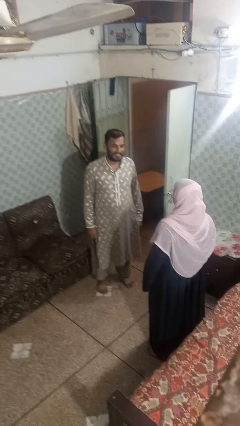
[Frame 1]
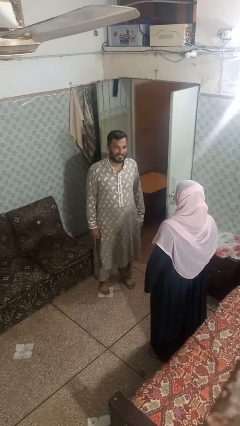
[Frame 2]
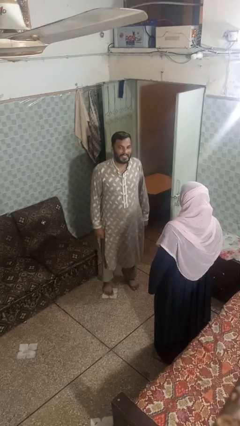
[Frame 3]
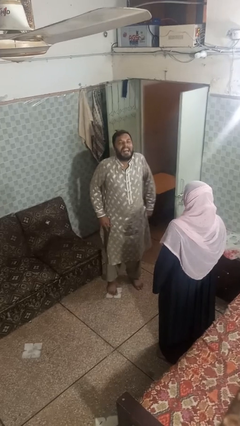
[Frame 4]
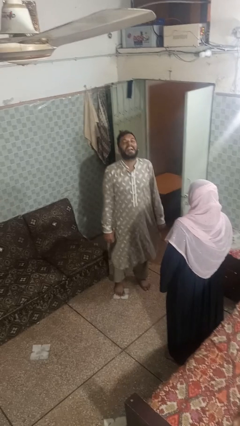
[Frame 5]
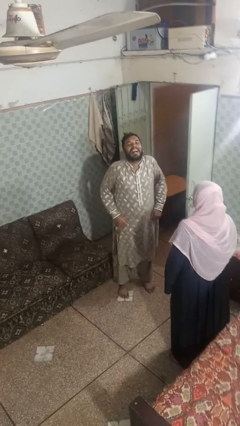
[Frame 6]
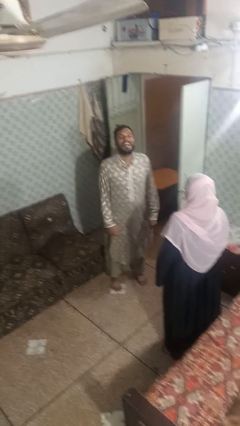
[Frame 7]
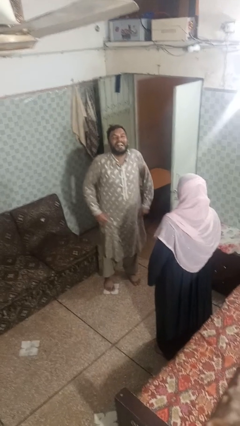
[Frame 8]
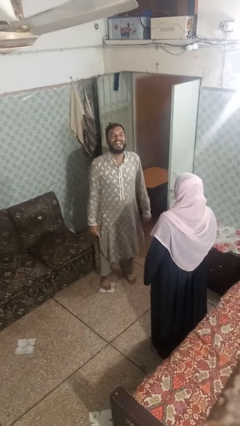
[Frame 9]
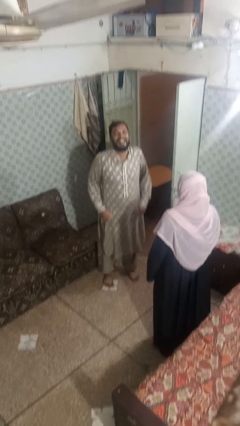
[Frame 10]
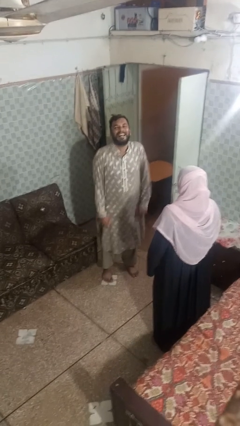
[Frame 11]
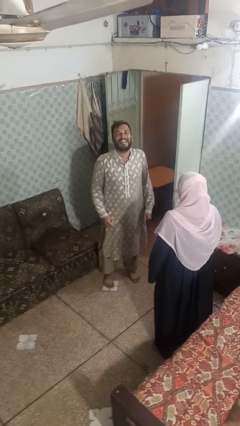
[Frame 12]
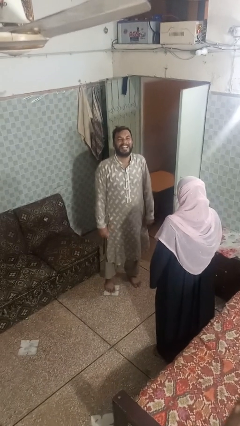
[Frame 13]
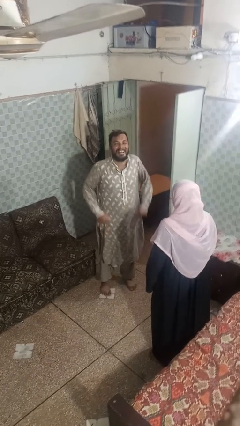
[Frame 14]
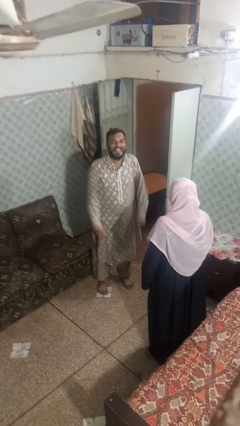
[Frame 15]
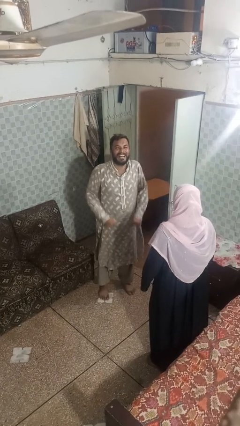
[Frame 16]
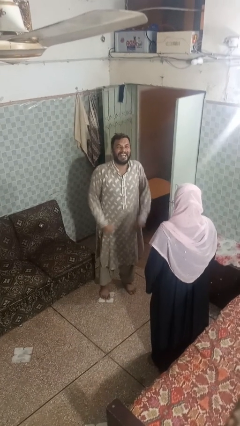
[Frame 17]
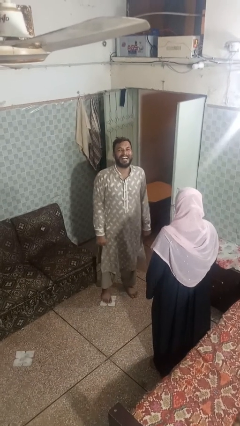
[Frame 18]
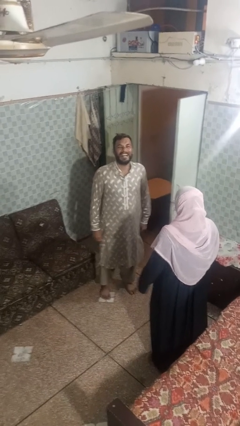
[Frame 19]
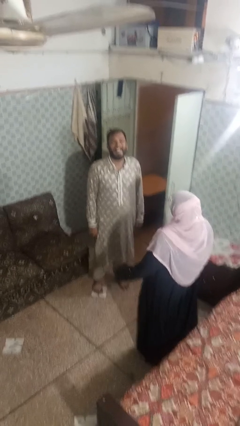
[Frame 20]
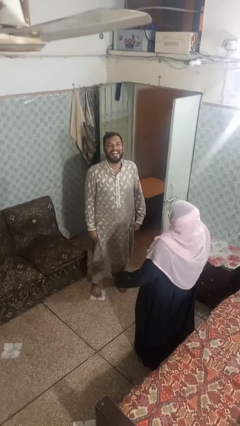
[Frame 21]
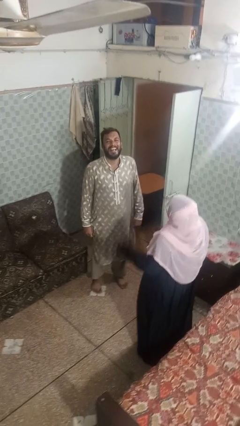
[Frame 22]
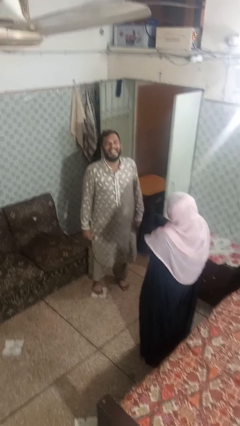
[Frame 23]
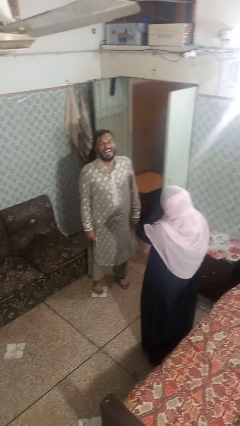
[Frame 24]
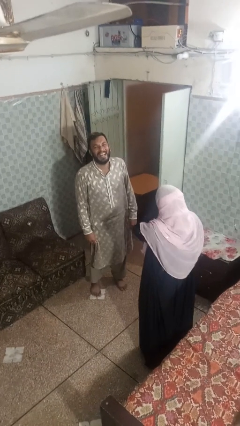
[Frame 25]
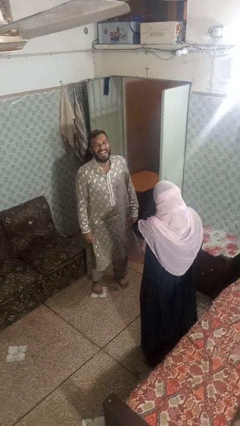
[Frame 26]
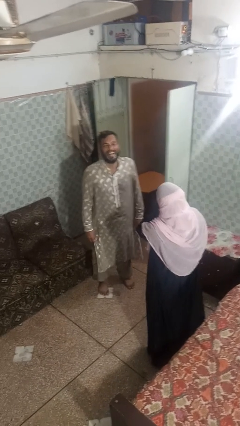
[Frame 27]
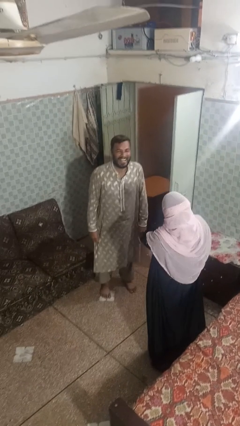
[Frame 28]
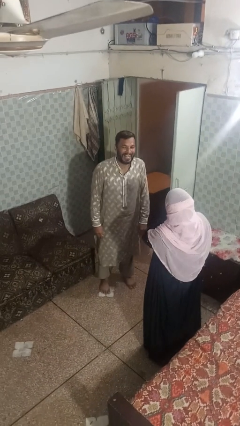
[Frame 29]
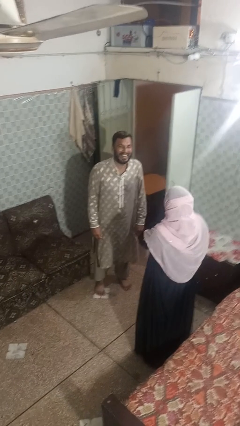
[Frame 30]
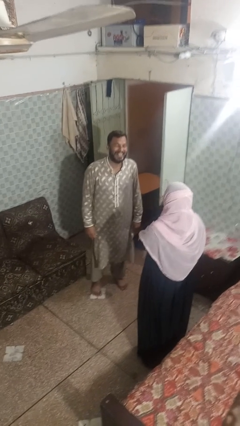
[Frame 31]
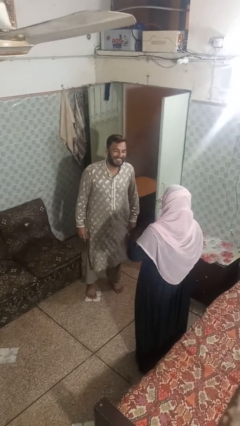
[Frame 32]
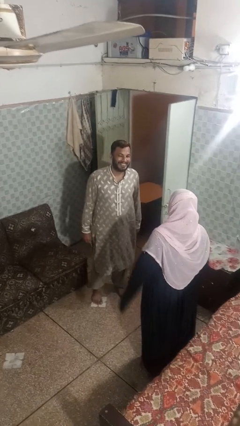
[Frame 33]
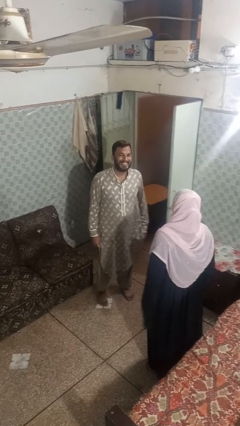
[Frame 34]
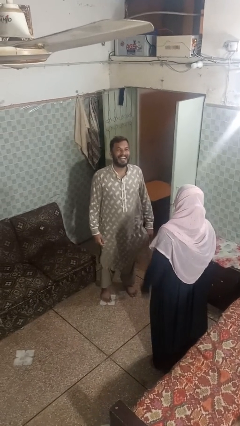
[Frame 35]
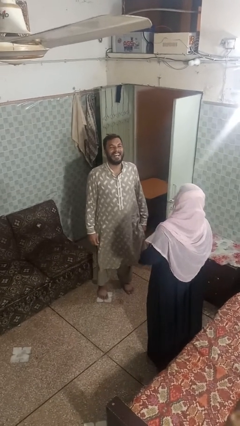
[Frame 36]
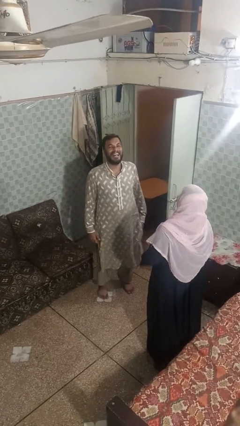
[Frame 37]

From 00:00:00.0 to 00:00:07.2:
person laughs with person

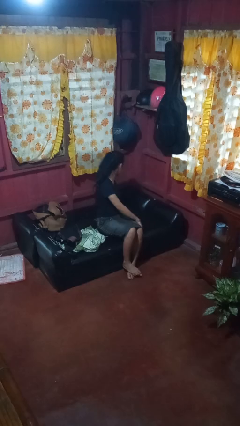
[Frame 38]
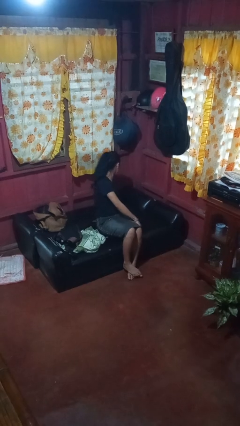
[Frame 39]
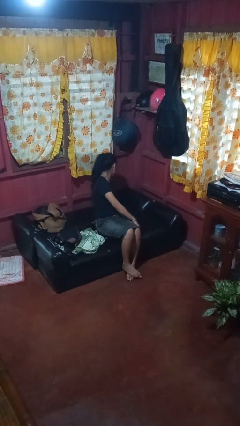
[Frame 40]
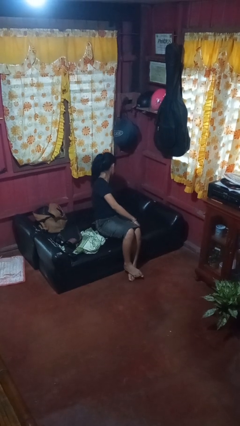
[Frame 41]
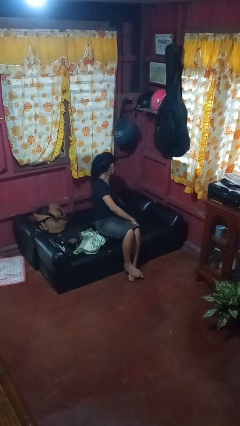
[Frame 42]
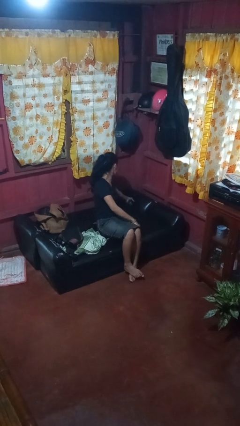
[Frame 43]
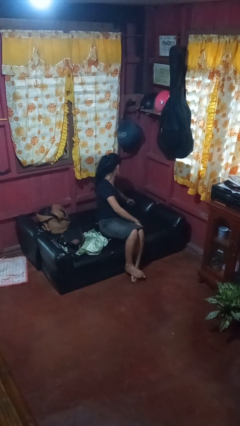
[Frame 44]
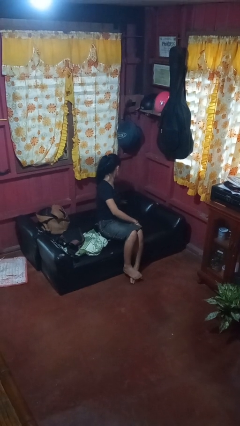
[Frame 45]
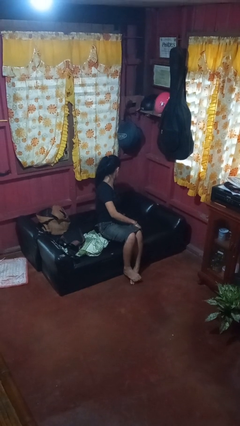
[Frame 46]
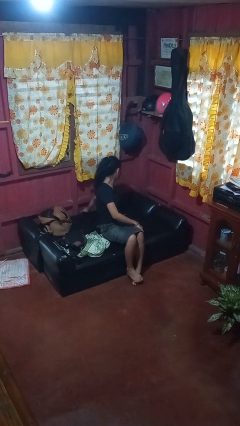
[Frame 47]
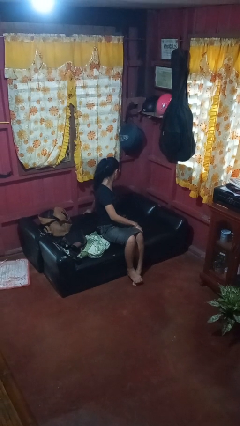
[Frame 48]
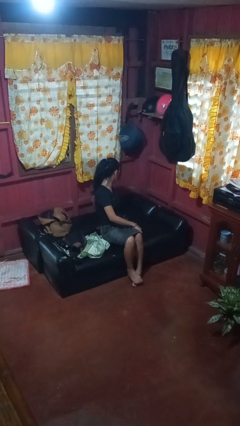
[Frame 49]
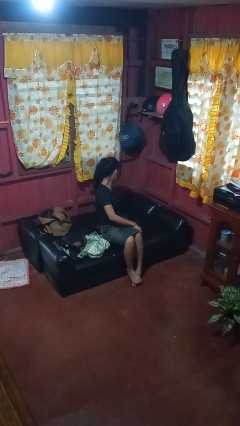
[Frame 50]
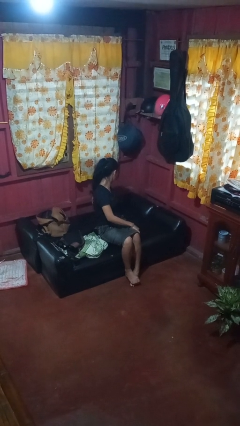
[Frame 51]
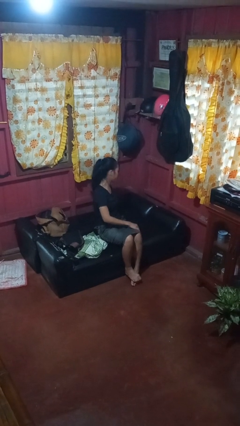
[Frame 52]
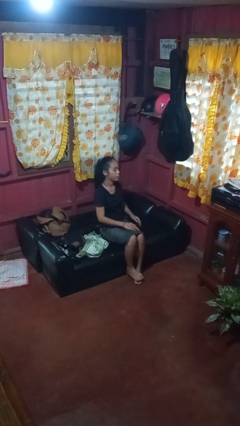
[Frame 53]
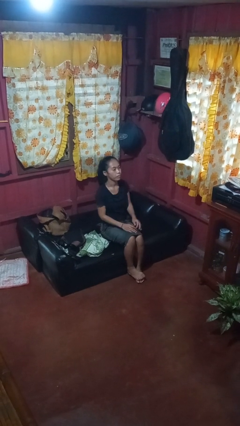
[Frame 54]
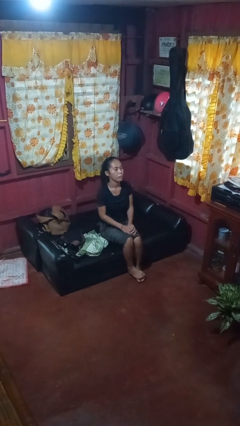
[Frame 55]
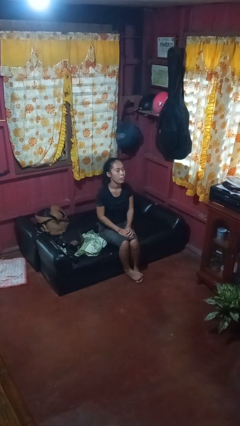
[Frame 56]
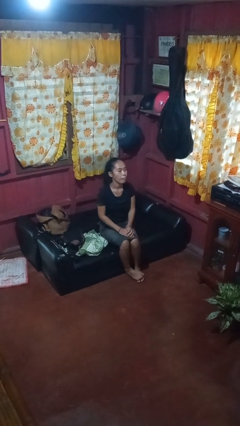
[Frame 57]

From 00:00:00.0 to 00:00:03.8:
person searches in couch

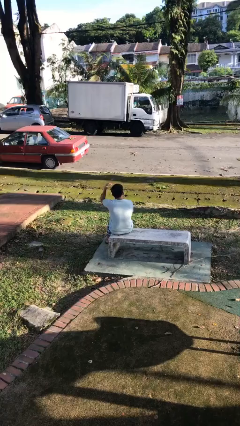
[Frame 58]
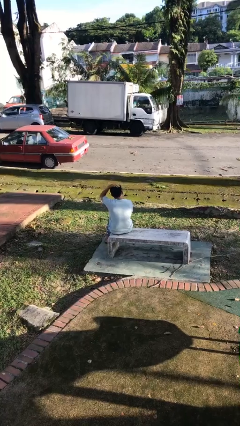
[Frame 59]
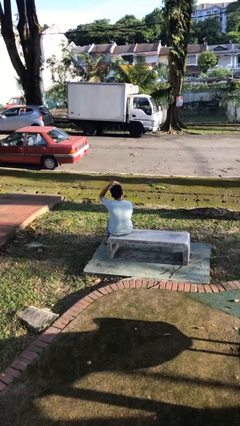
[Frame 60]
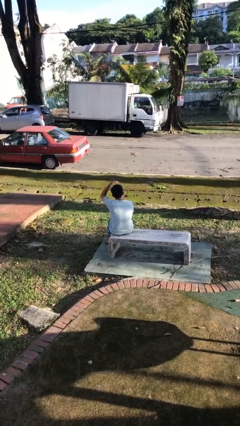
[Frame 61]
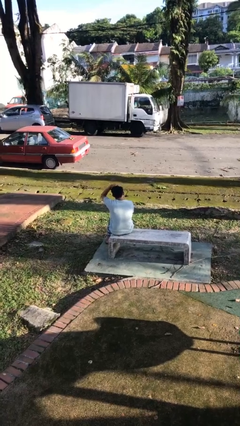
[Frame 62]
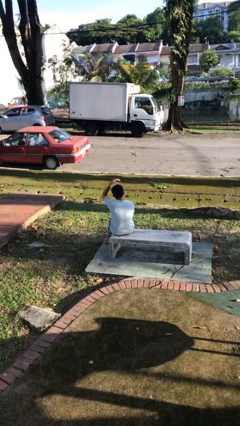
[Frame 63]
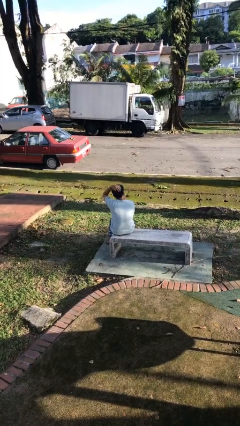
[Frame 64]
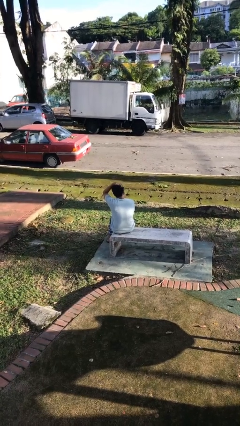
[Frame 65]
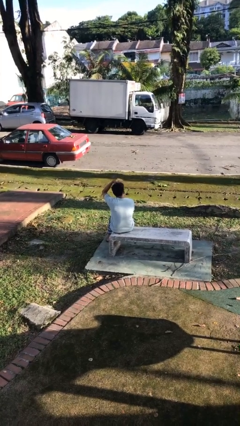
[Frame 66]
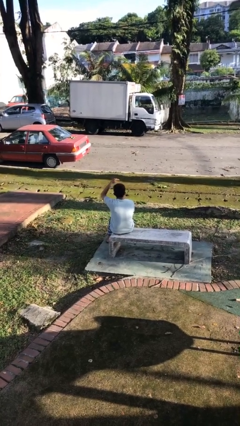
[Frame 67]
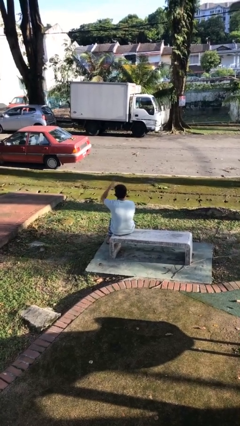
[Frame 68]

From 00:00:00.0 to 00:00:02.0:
person pats head

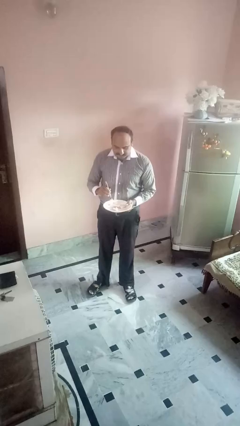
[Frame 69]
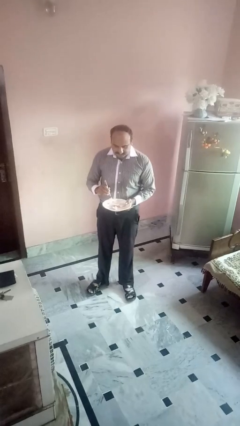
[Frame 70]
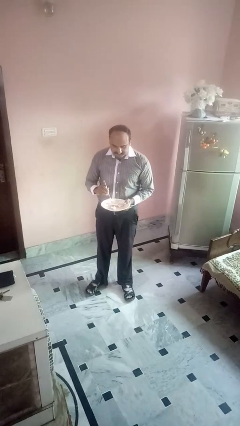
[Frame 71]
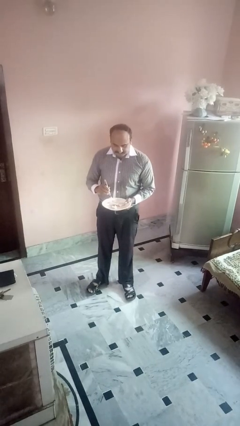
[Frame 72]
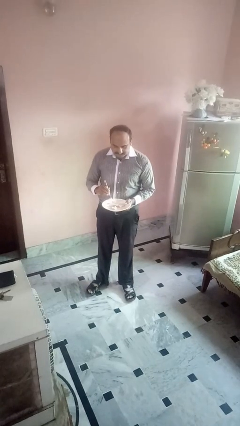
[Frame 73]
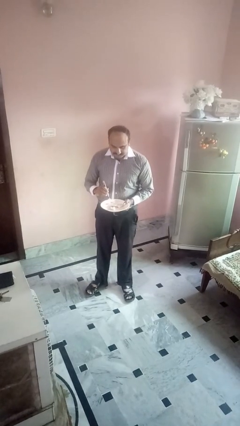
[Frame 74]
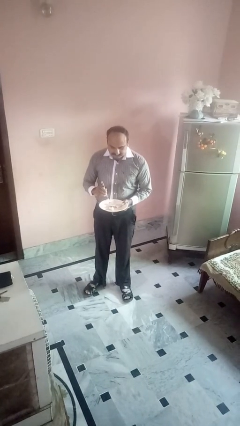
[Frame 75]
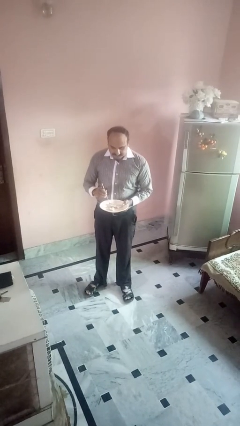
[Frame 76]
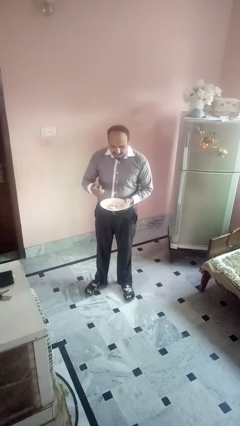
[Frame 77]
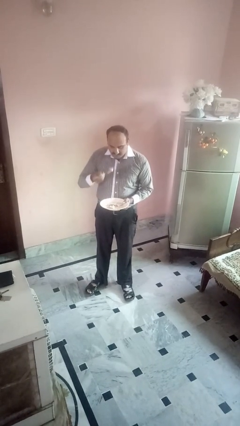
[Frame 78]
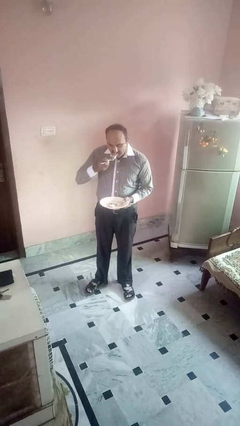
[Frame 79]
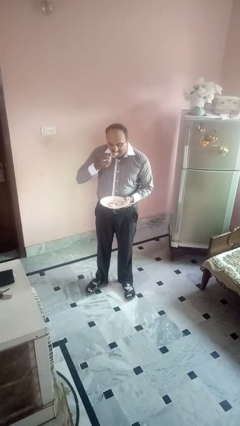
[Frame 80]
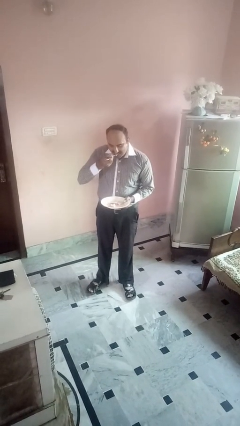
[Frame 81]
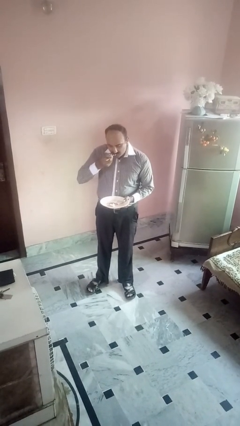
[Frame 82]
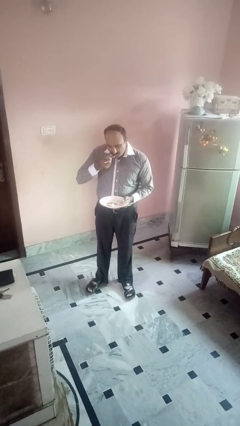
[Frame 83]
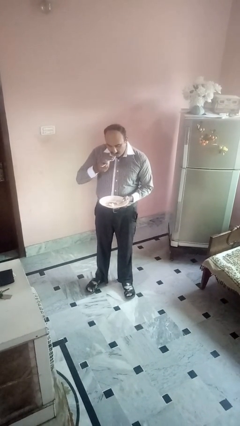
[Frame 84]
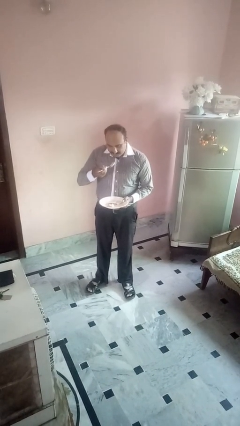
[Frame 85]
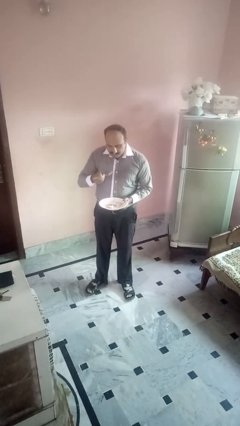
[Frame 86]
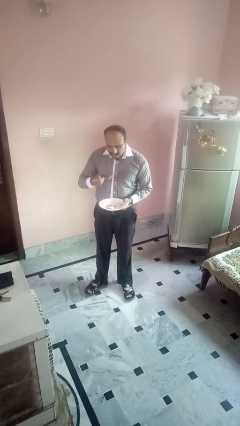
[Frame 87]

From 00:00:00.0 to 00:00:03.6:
person eats with utensil

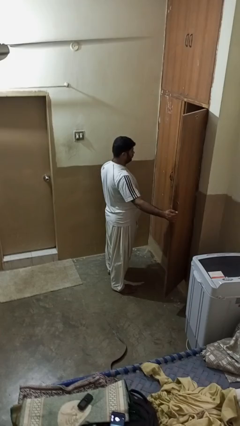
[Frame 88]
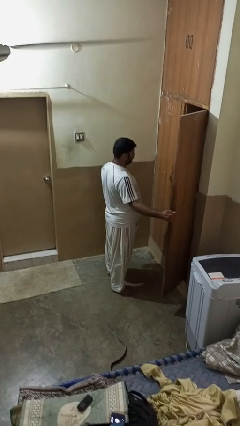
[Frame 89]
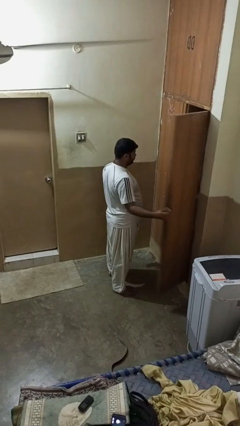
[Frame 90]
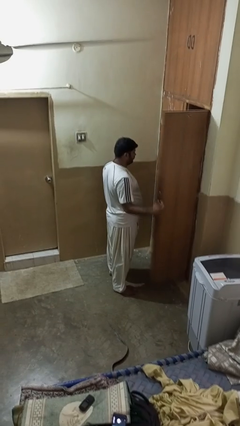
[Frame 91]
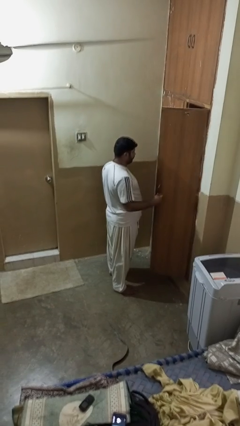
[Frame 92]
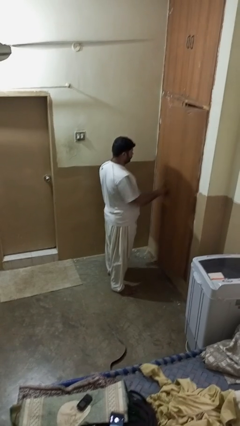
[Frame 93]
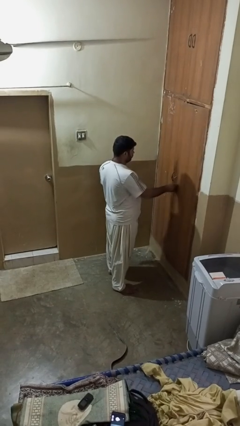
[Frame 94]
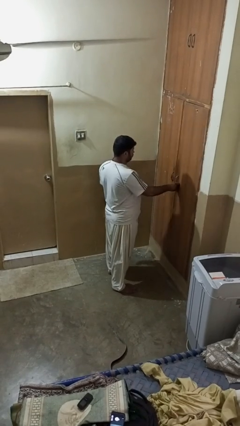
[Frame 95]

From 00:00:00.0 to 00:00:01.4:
person closes closet door
